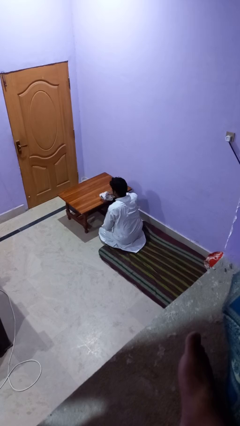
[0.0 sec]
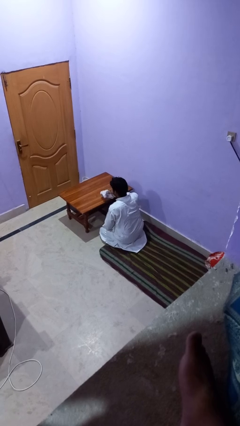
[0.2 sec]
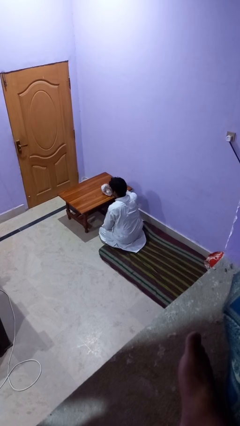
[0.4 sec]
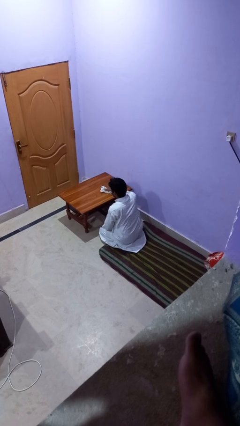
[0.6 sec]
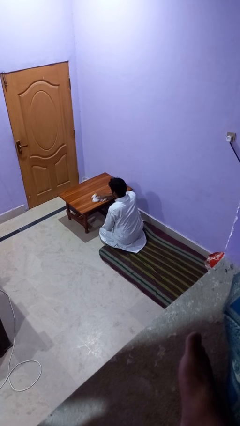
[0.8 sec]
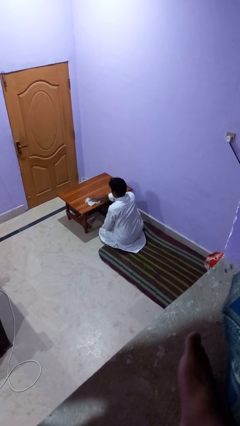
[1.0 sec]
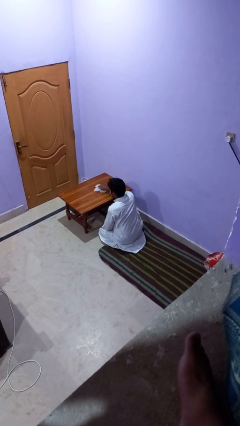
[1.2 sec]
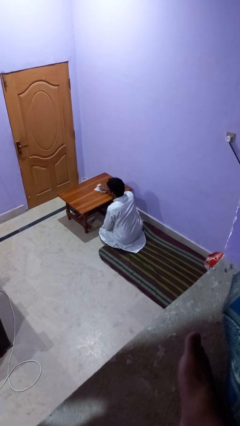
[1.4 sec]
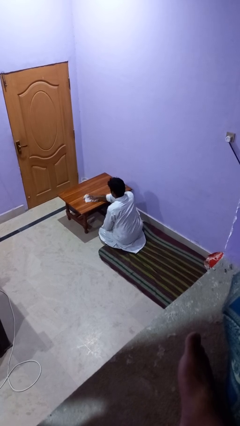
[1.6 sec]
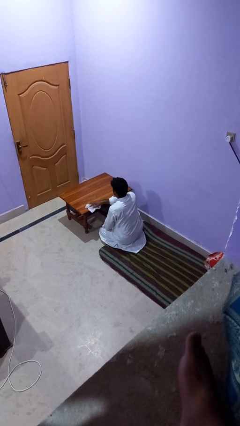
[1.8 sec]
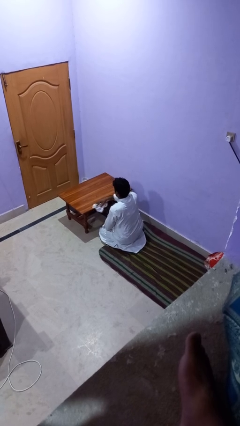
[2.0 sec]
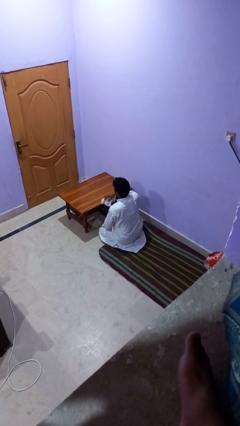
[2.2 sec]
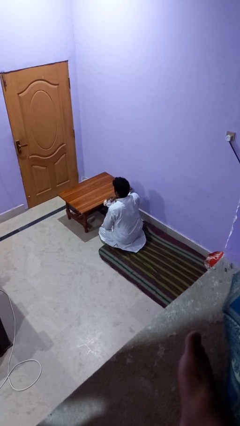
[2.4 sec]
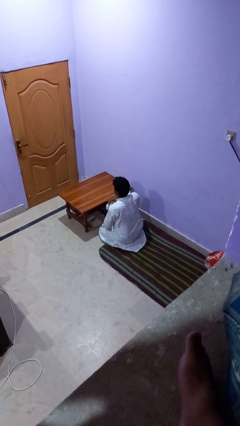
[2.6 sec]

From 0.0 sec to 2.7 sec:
person cleans table with rag

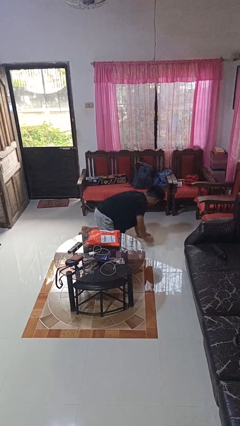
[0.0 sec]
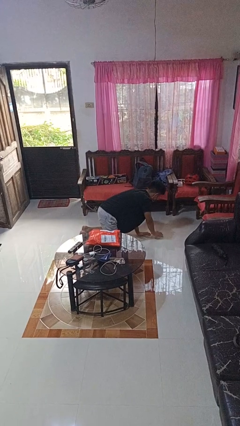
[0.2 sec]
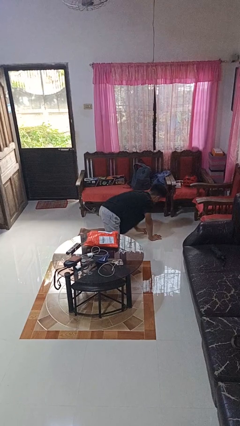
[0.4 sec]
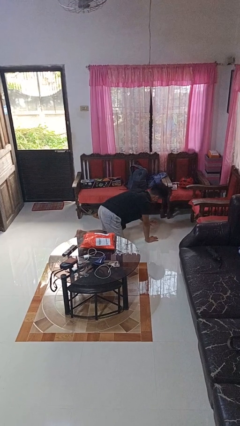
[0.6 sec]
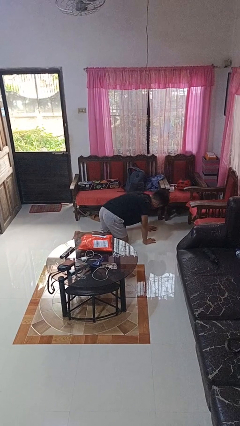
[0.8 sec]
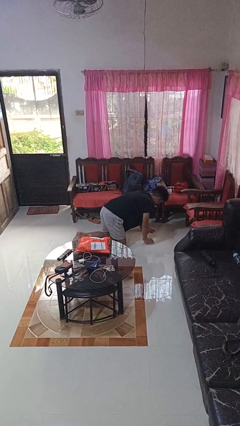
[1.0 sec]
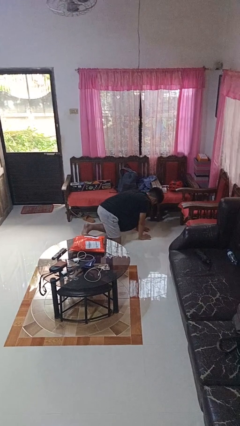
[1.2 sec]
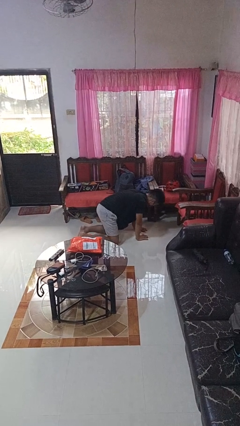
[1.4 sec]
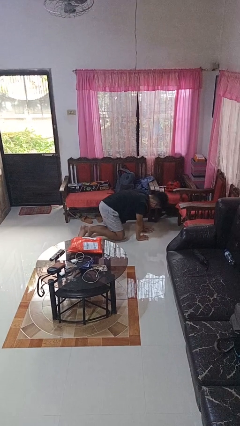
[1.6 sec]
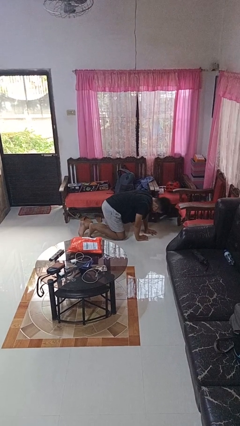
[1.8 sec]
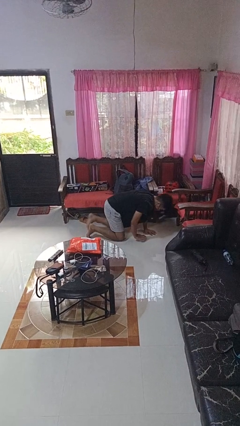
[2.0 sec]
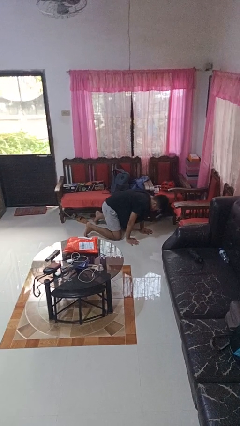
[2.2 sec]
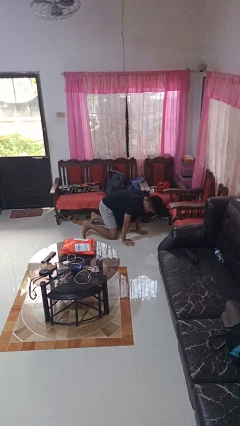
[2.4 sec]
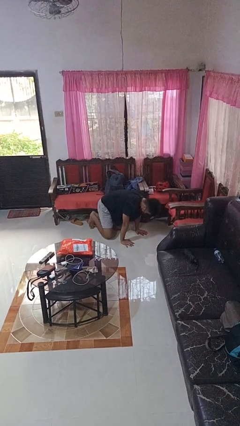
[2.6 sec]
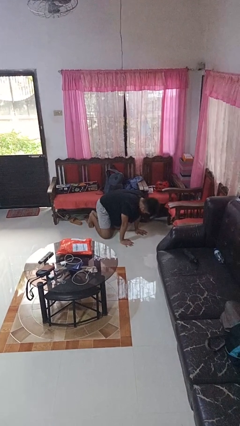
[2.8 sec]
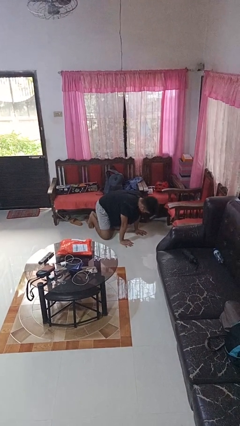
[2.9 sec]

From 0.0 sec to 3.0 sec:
person crawls

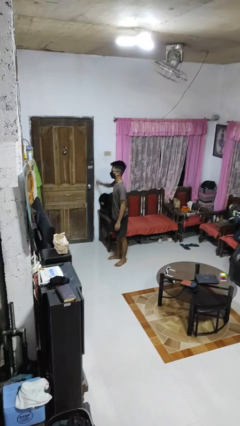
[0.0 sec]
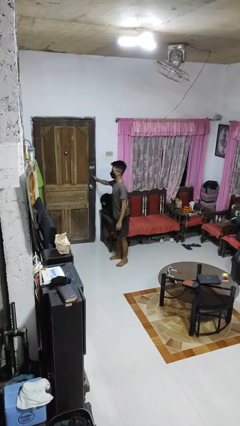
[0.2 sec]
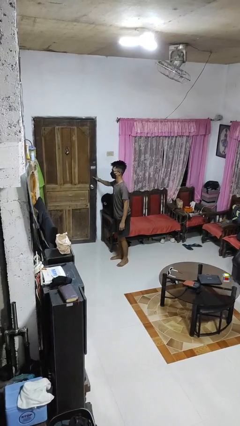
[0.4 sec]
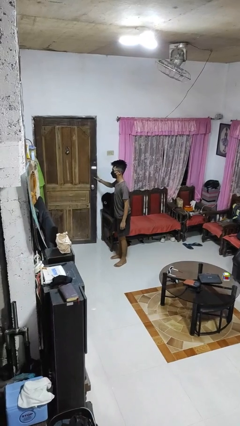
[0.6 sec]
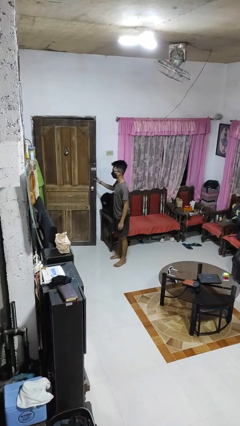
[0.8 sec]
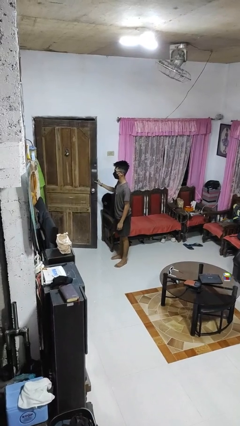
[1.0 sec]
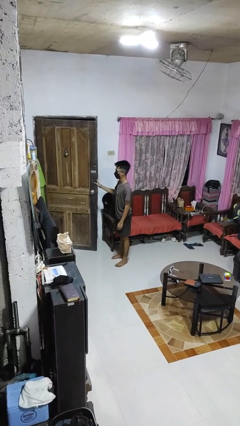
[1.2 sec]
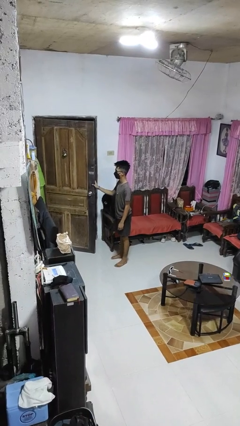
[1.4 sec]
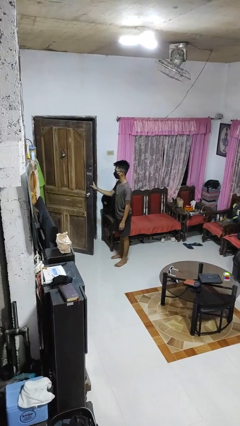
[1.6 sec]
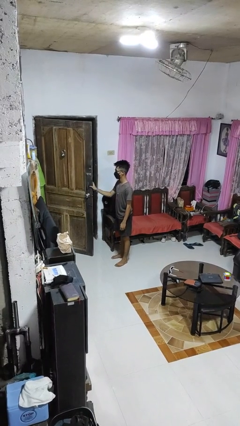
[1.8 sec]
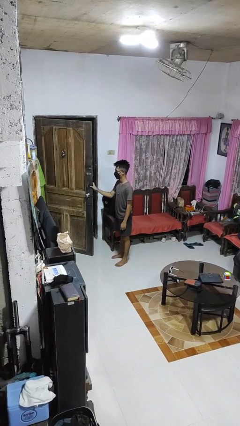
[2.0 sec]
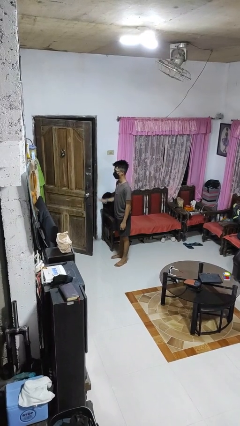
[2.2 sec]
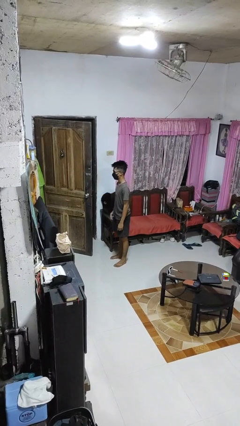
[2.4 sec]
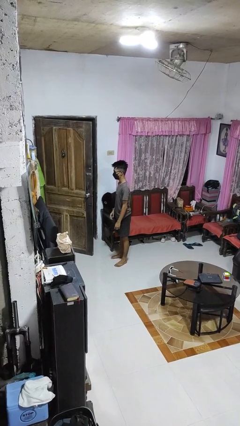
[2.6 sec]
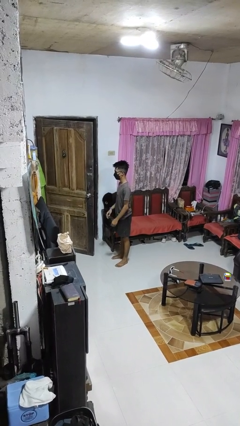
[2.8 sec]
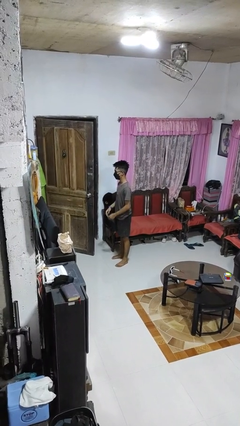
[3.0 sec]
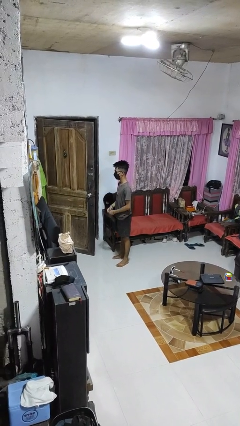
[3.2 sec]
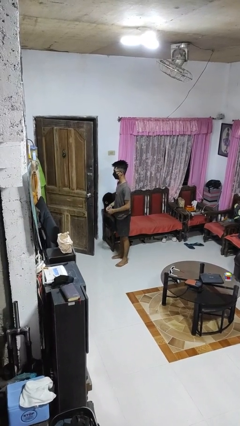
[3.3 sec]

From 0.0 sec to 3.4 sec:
person opens facility door

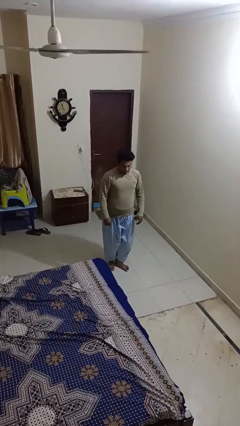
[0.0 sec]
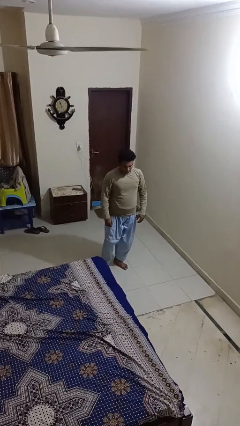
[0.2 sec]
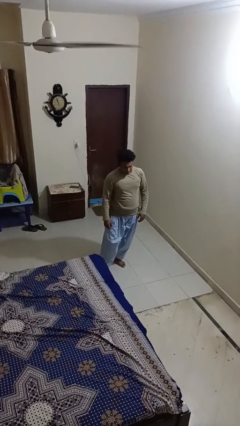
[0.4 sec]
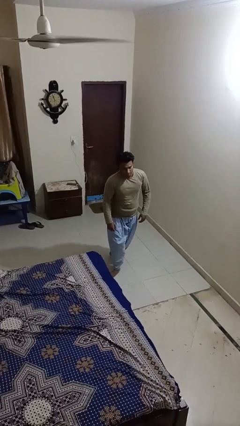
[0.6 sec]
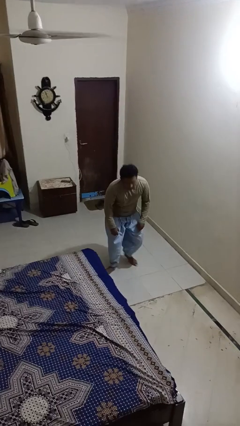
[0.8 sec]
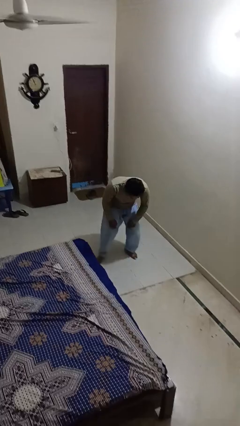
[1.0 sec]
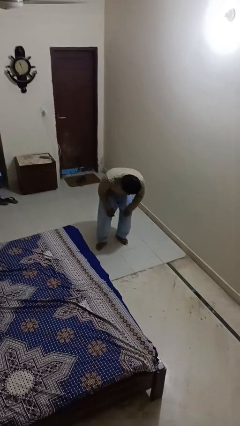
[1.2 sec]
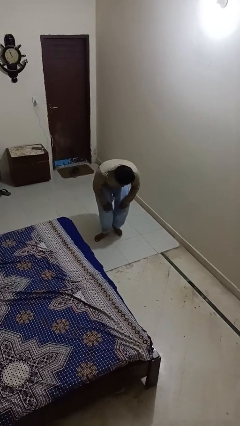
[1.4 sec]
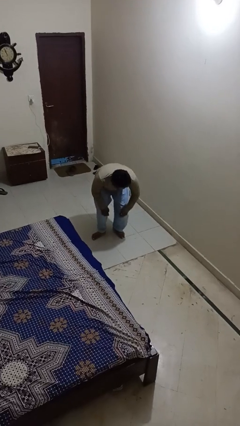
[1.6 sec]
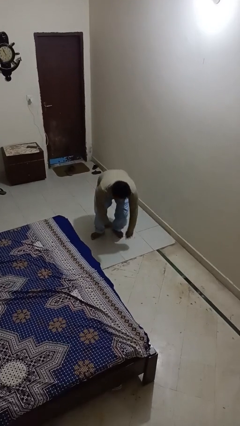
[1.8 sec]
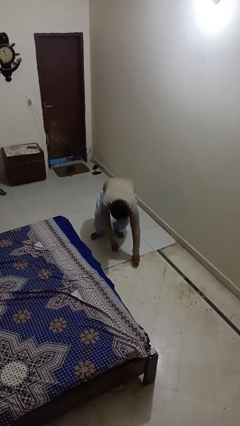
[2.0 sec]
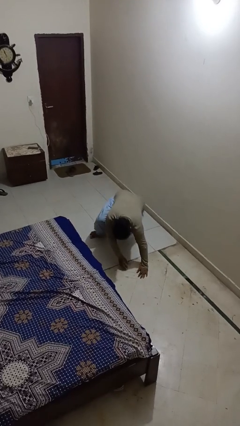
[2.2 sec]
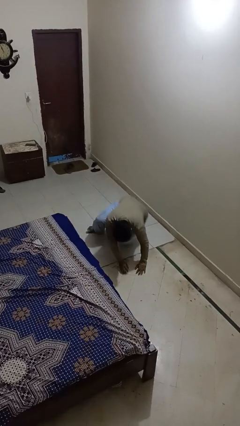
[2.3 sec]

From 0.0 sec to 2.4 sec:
person trips on object on floor

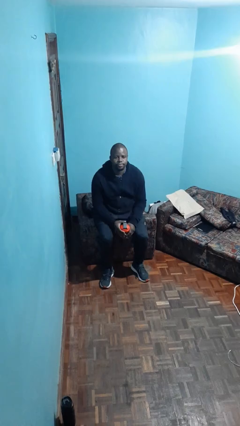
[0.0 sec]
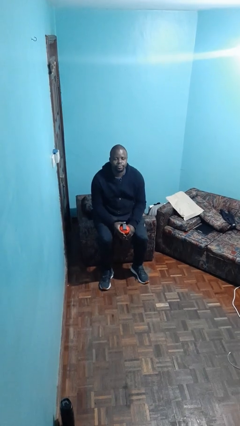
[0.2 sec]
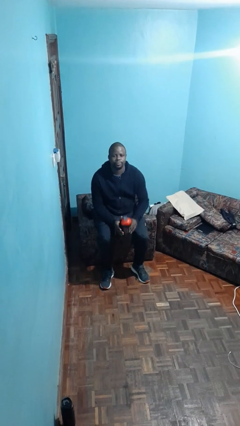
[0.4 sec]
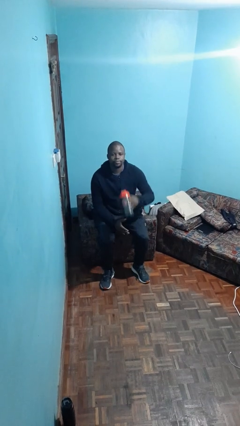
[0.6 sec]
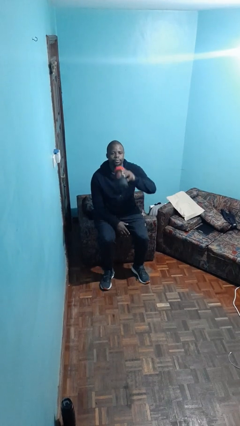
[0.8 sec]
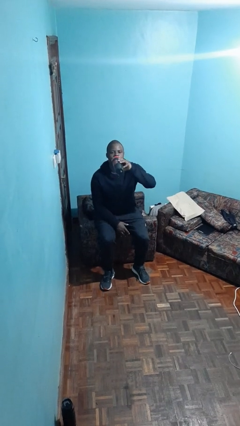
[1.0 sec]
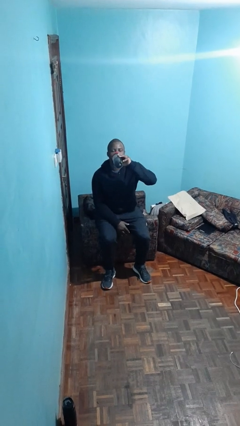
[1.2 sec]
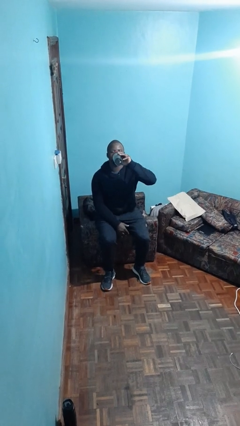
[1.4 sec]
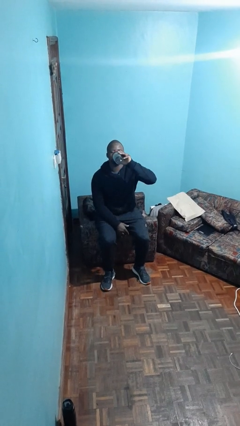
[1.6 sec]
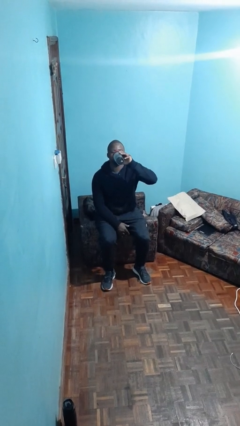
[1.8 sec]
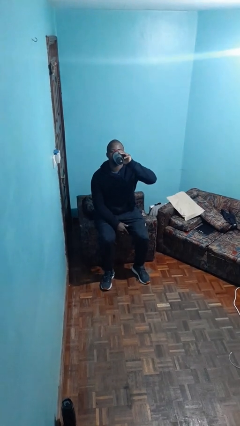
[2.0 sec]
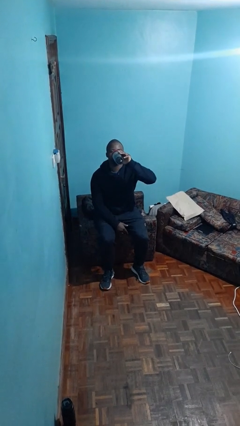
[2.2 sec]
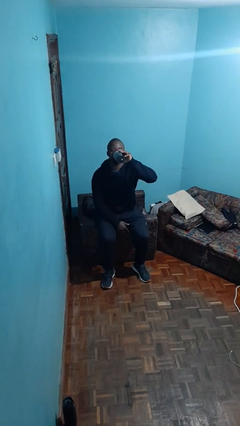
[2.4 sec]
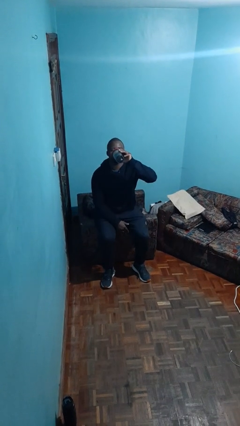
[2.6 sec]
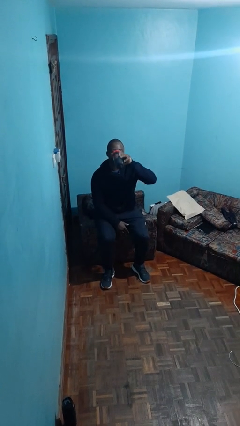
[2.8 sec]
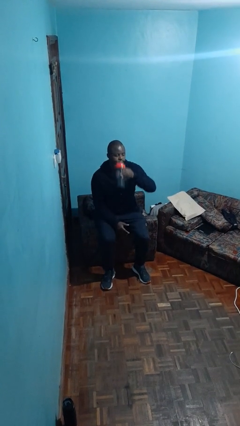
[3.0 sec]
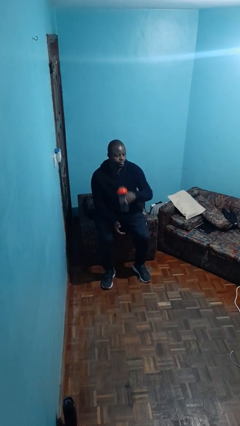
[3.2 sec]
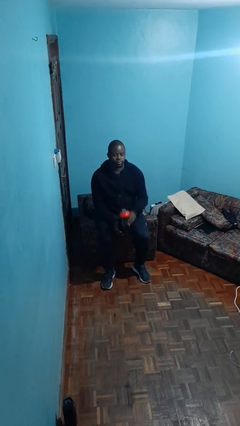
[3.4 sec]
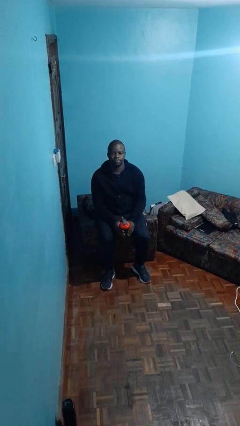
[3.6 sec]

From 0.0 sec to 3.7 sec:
person drinks from bottle

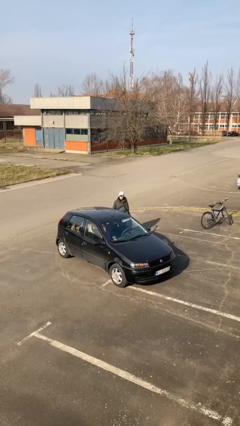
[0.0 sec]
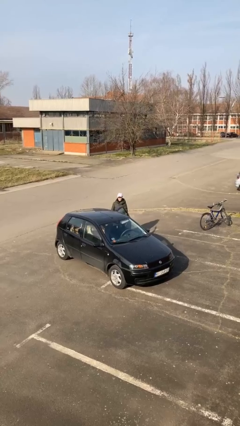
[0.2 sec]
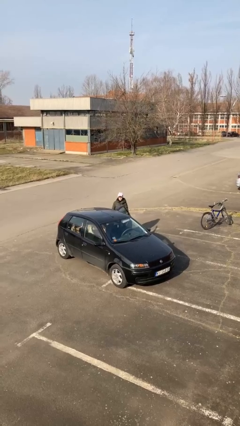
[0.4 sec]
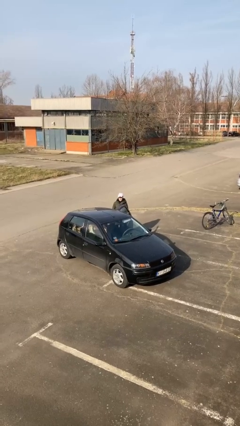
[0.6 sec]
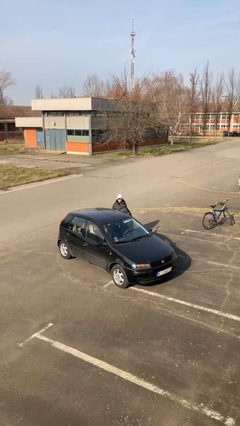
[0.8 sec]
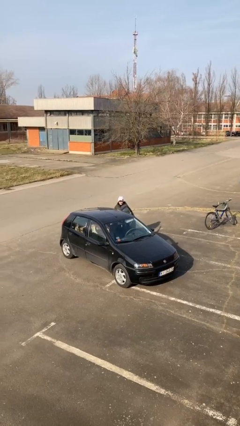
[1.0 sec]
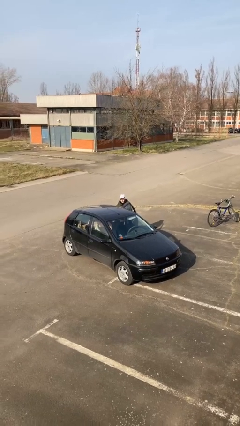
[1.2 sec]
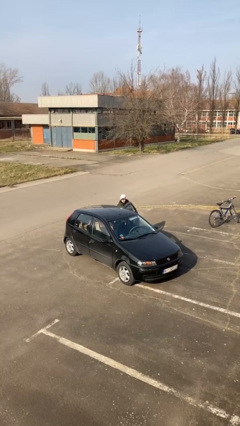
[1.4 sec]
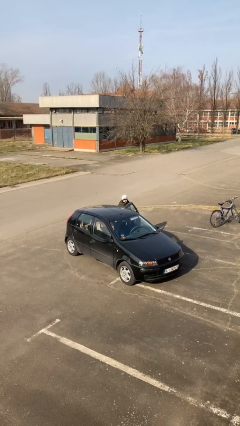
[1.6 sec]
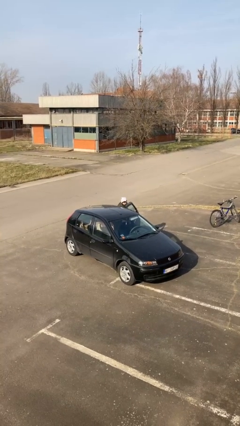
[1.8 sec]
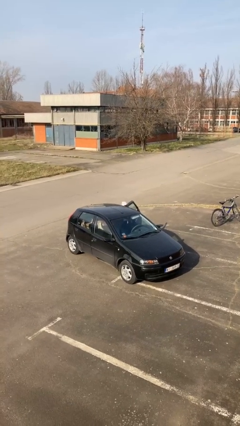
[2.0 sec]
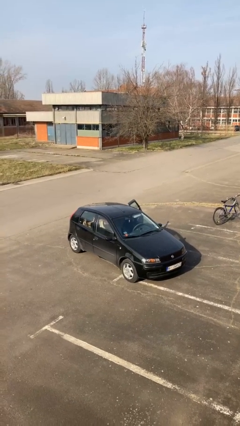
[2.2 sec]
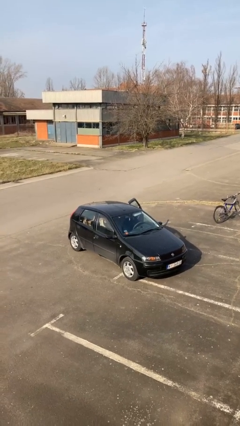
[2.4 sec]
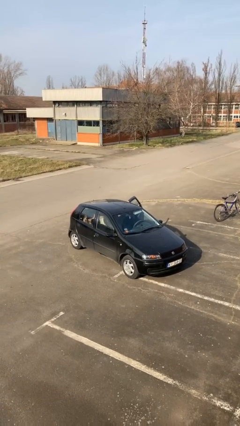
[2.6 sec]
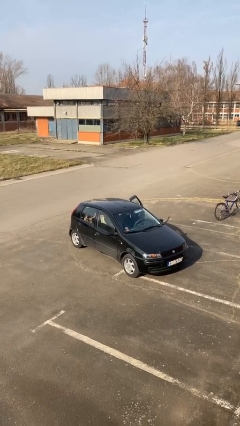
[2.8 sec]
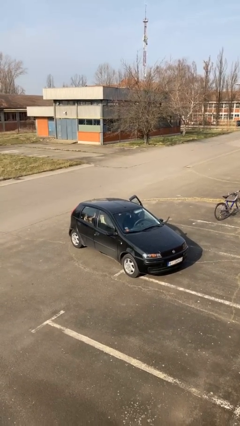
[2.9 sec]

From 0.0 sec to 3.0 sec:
person enters car
